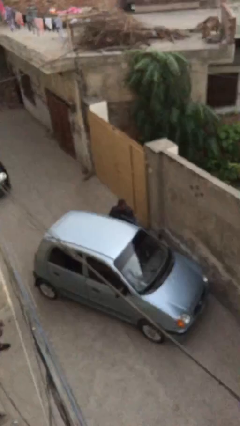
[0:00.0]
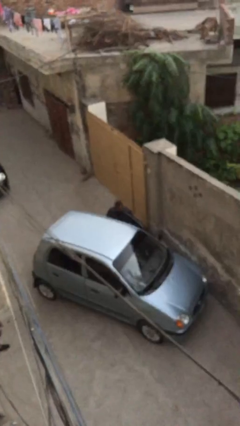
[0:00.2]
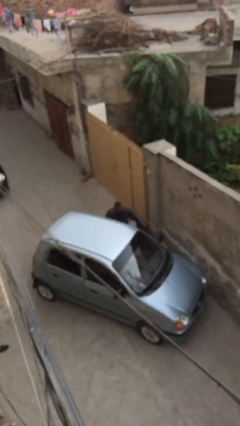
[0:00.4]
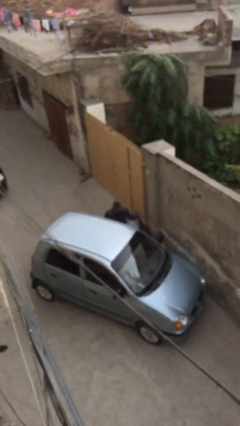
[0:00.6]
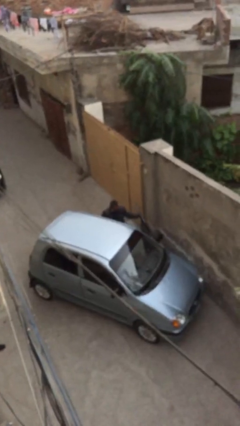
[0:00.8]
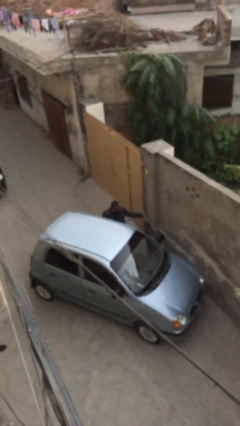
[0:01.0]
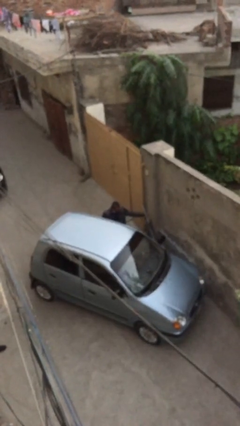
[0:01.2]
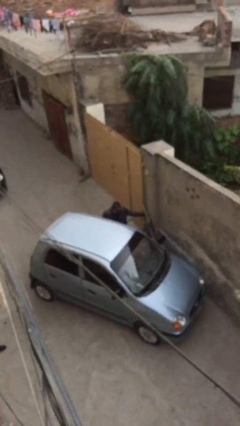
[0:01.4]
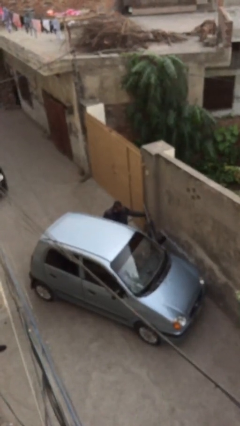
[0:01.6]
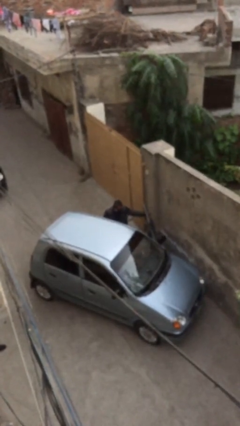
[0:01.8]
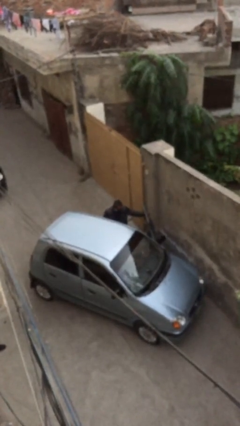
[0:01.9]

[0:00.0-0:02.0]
person opens car door

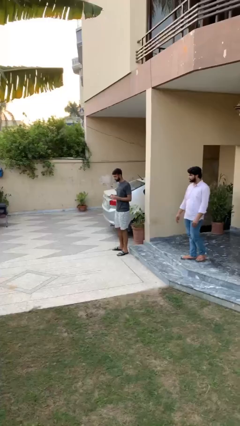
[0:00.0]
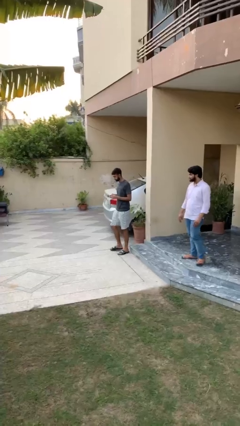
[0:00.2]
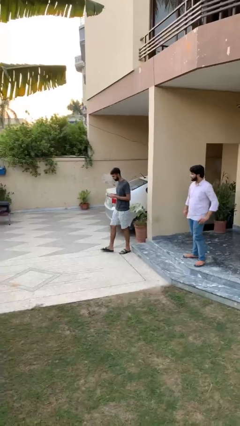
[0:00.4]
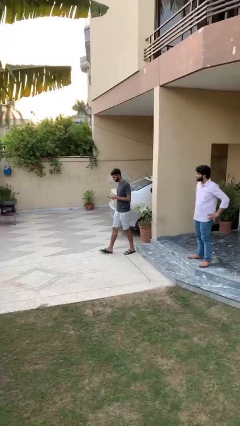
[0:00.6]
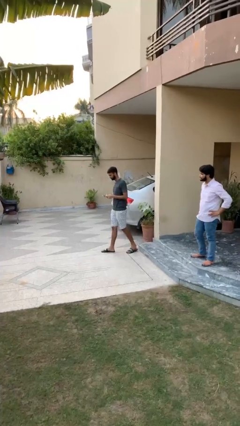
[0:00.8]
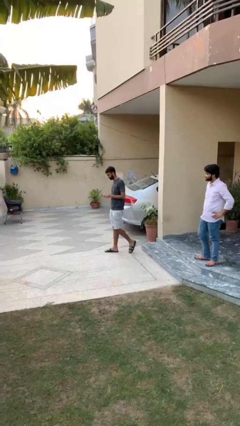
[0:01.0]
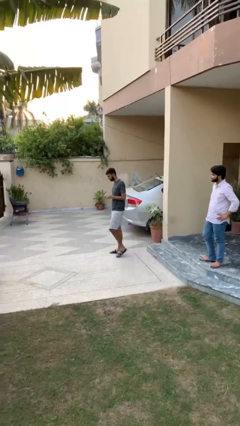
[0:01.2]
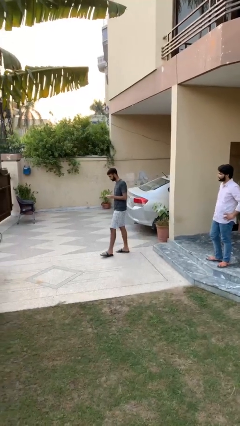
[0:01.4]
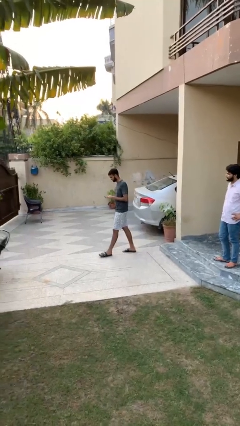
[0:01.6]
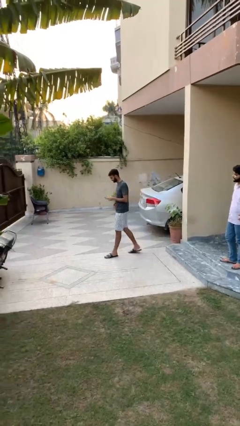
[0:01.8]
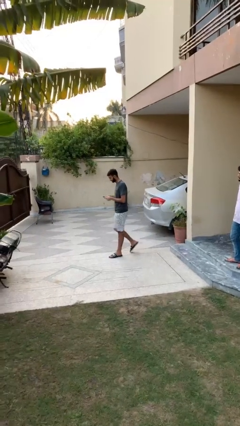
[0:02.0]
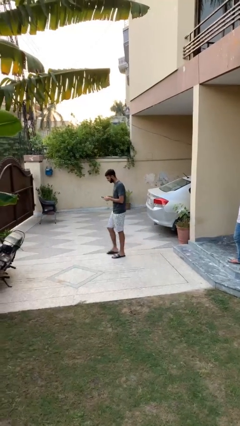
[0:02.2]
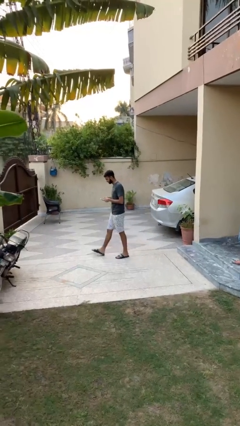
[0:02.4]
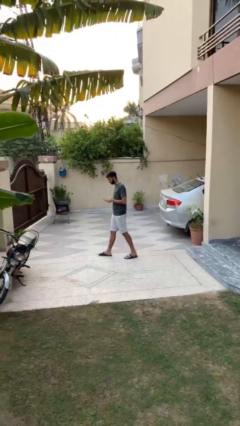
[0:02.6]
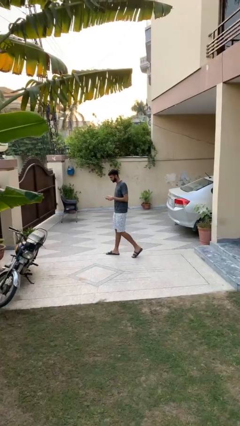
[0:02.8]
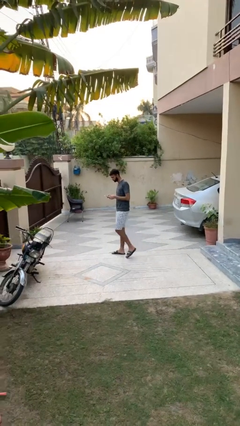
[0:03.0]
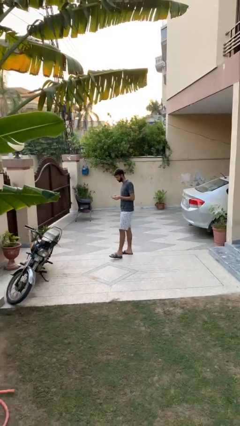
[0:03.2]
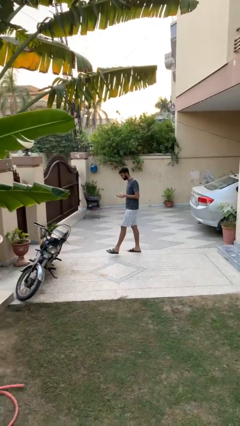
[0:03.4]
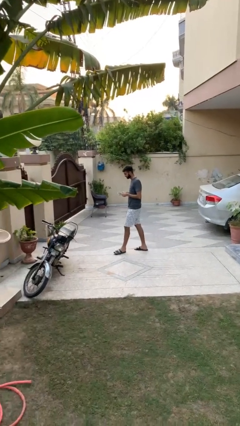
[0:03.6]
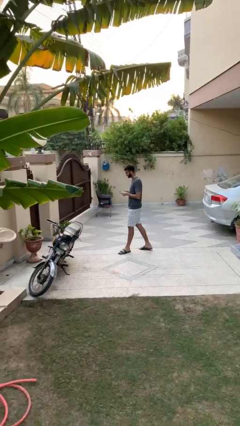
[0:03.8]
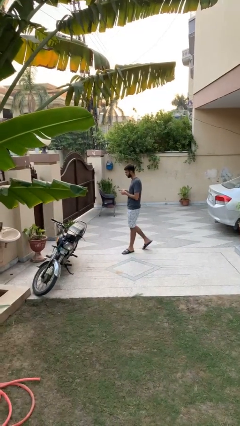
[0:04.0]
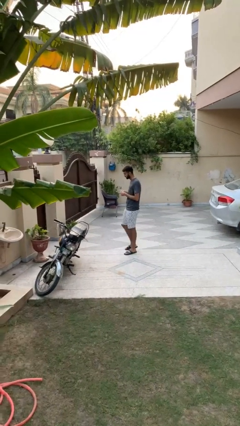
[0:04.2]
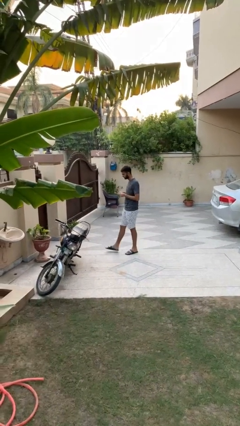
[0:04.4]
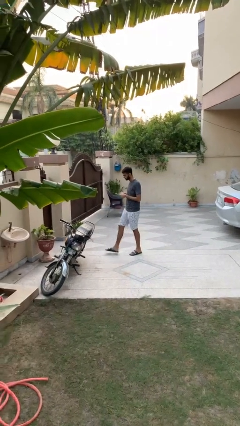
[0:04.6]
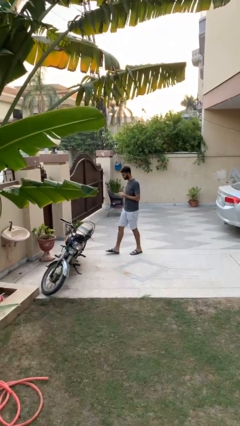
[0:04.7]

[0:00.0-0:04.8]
person texts on phone

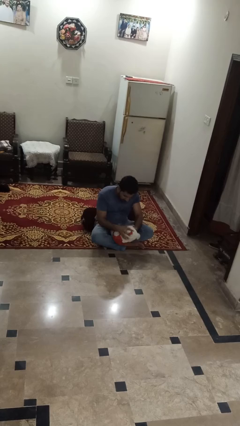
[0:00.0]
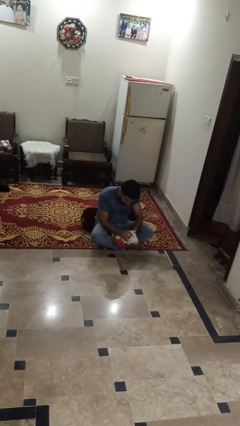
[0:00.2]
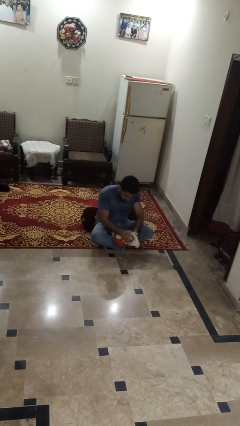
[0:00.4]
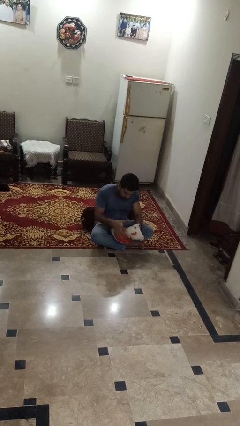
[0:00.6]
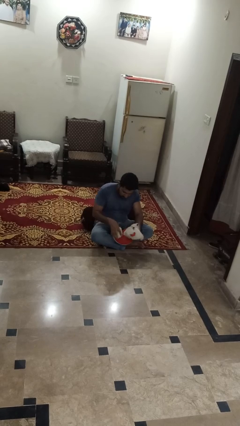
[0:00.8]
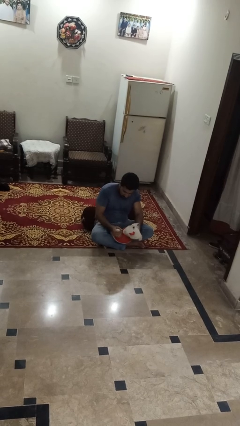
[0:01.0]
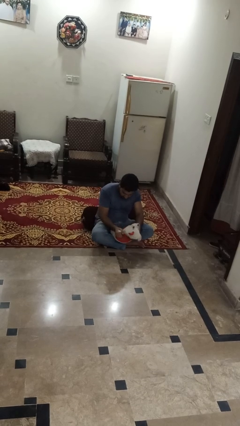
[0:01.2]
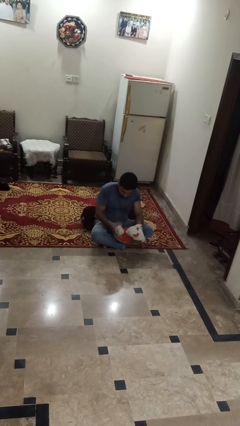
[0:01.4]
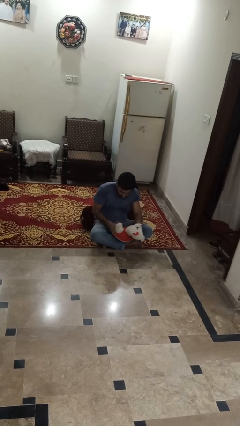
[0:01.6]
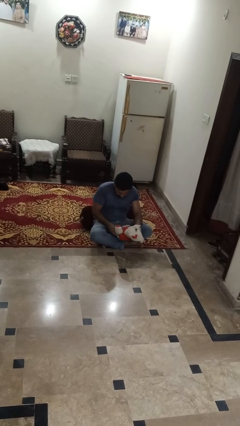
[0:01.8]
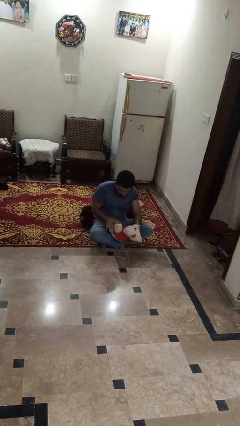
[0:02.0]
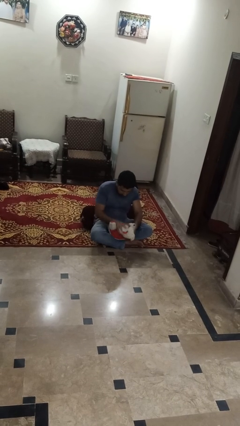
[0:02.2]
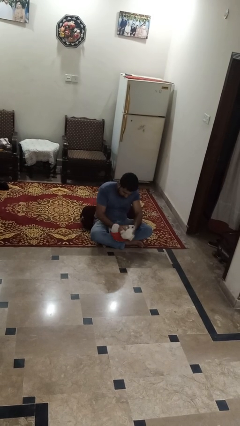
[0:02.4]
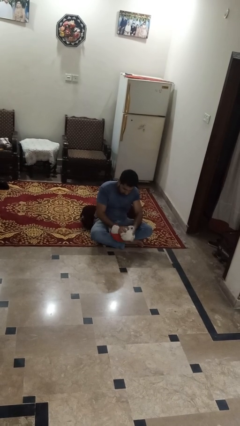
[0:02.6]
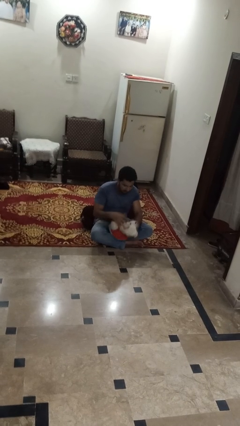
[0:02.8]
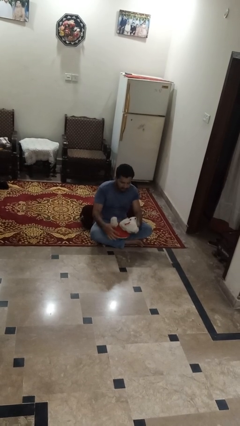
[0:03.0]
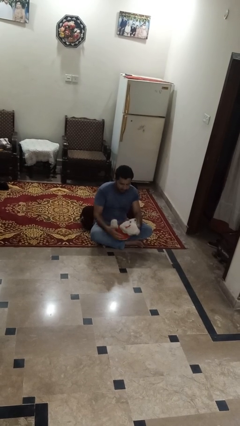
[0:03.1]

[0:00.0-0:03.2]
person squeezes object

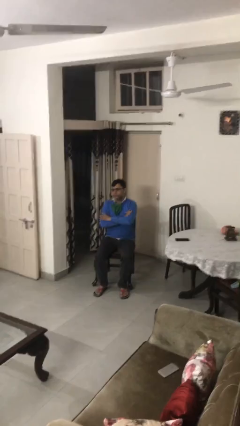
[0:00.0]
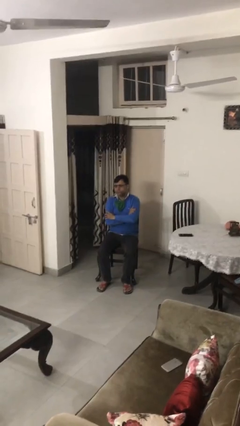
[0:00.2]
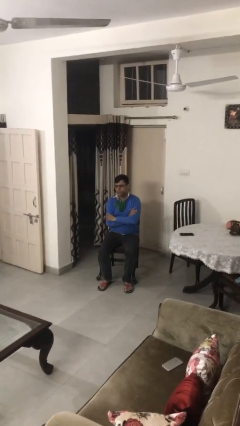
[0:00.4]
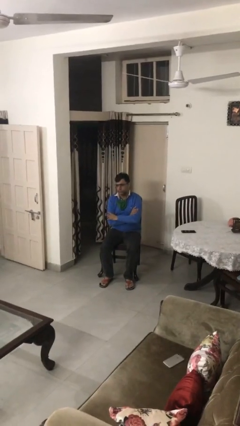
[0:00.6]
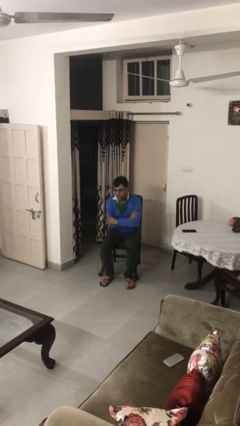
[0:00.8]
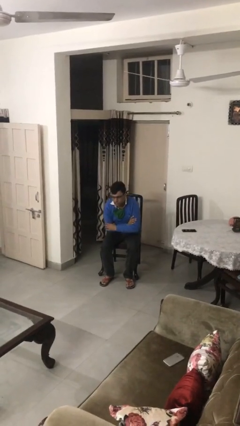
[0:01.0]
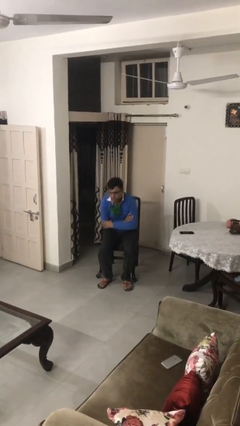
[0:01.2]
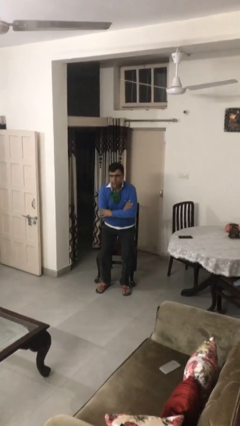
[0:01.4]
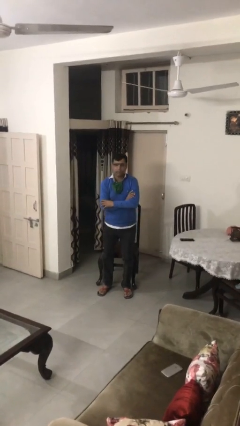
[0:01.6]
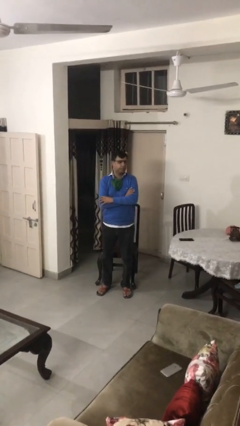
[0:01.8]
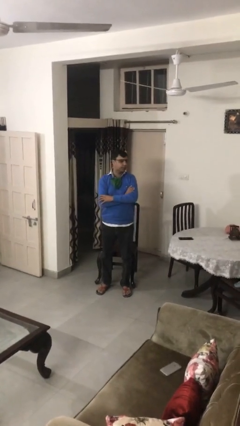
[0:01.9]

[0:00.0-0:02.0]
person stands up

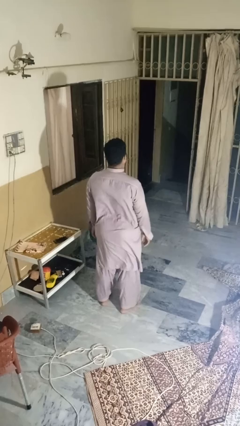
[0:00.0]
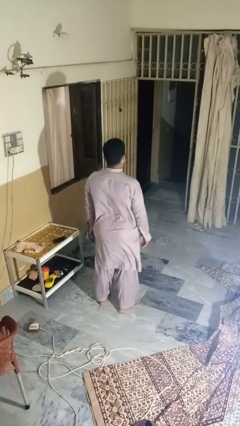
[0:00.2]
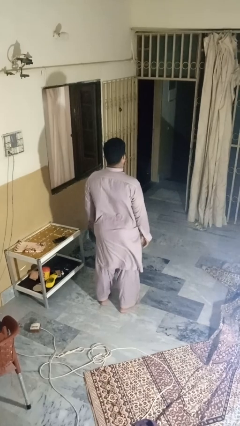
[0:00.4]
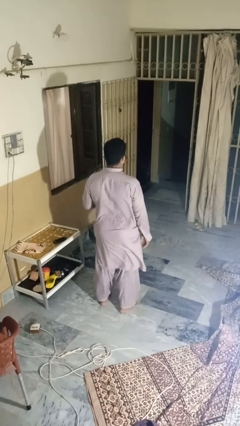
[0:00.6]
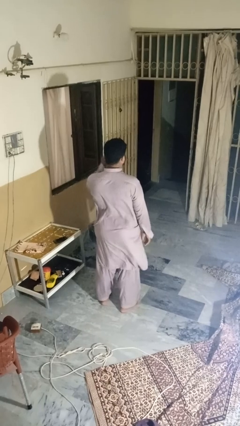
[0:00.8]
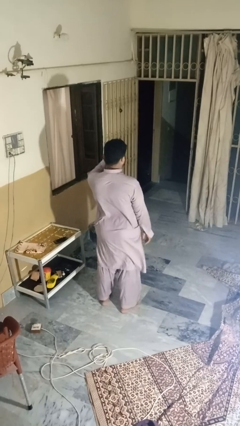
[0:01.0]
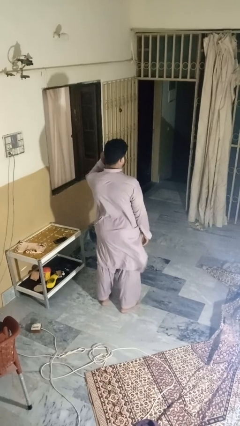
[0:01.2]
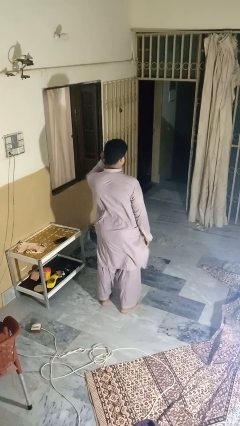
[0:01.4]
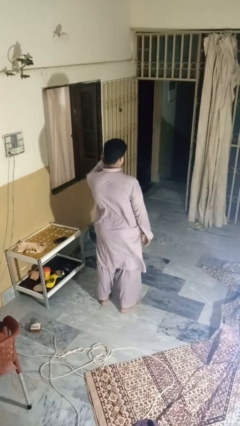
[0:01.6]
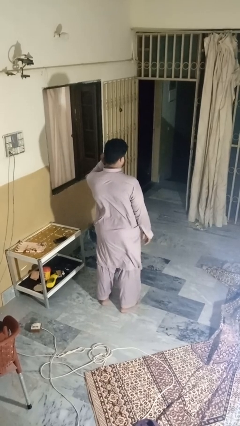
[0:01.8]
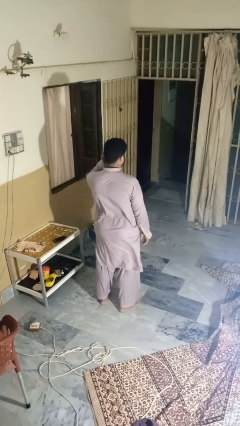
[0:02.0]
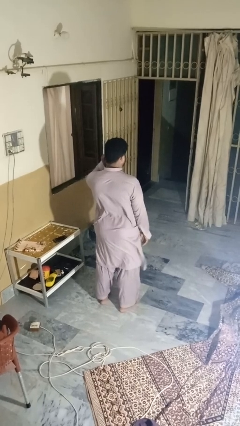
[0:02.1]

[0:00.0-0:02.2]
person touches earlobe

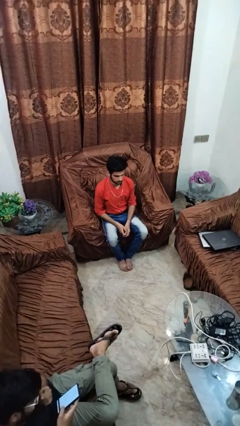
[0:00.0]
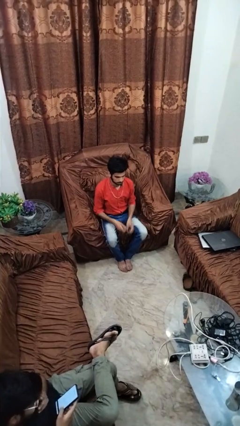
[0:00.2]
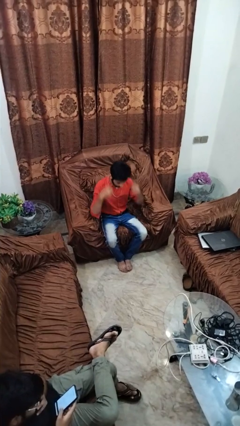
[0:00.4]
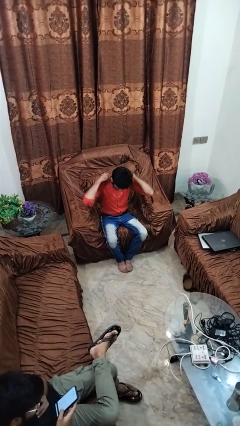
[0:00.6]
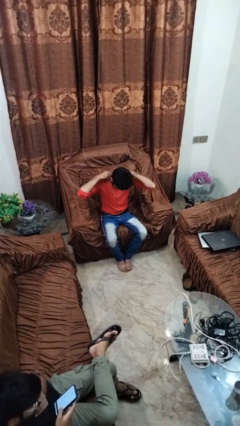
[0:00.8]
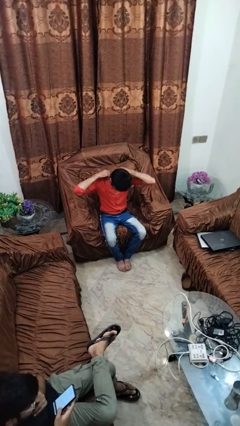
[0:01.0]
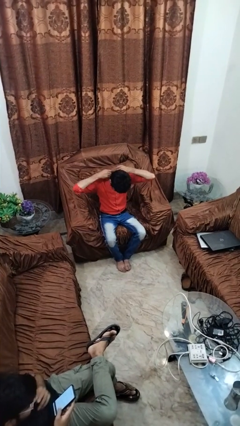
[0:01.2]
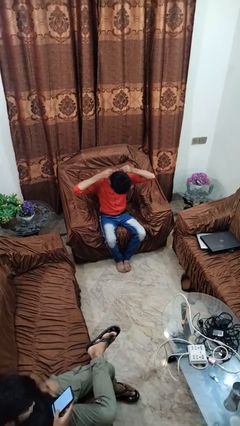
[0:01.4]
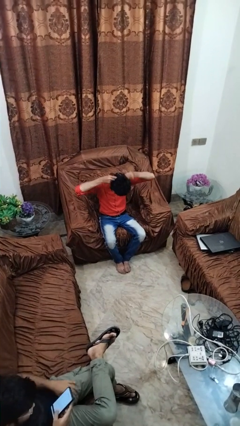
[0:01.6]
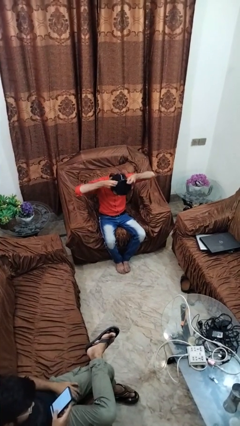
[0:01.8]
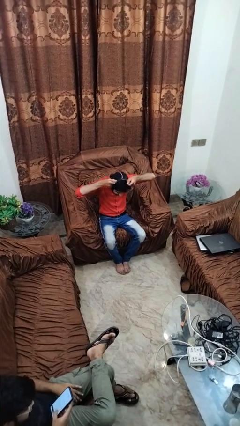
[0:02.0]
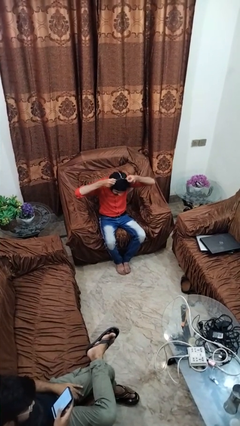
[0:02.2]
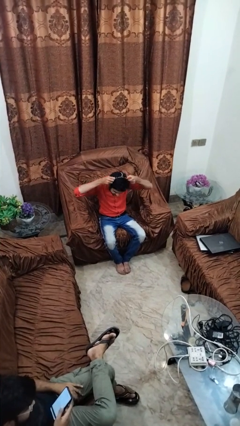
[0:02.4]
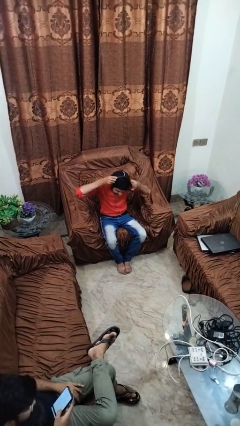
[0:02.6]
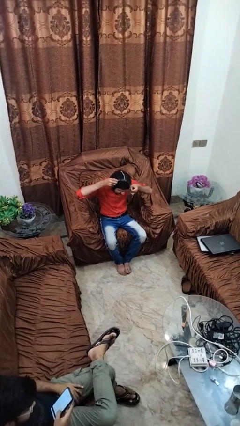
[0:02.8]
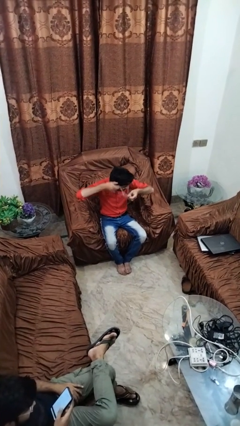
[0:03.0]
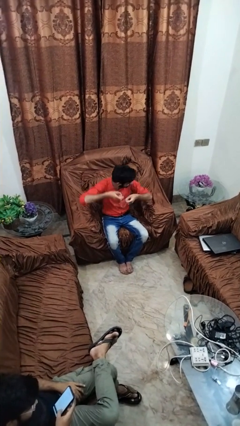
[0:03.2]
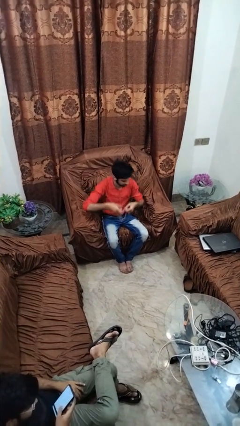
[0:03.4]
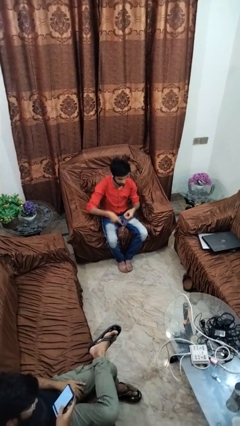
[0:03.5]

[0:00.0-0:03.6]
person takes off necklace
